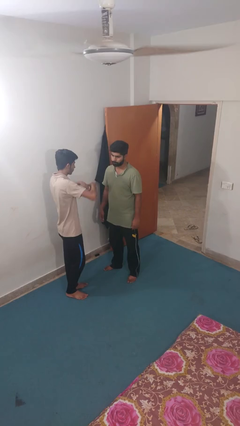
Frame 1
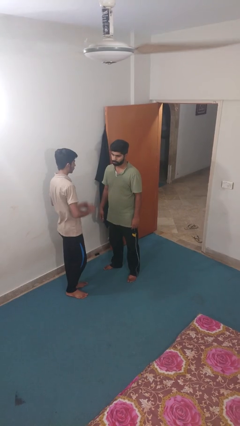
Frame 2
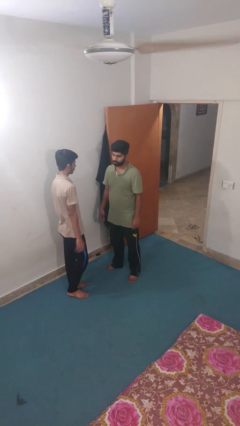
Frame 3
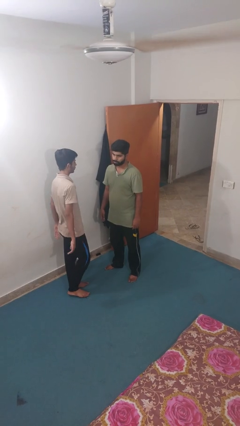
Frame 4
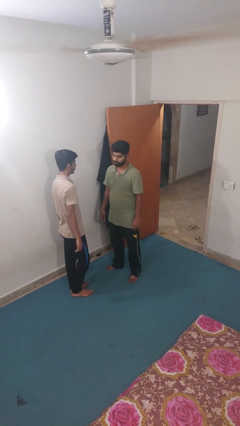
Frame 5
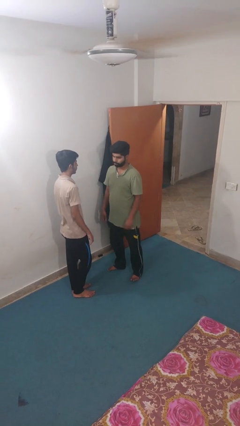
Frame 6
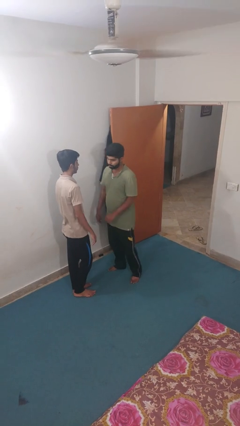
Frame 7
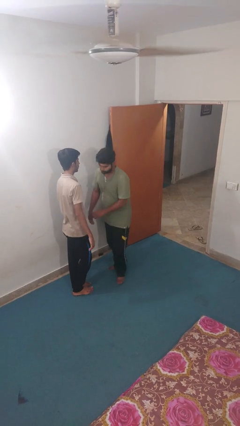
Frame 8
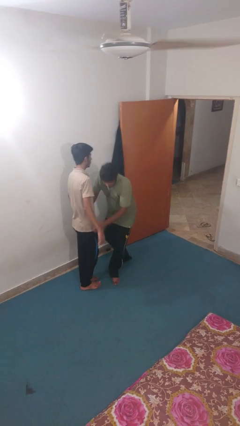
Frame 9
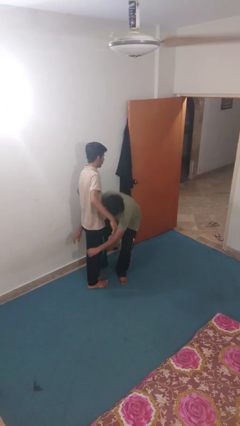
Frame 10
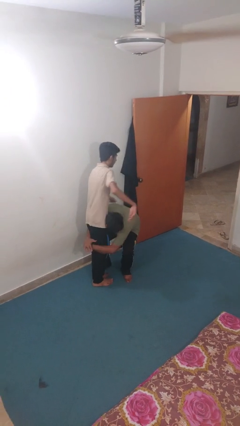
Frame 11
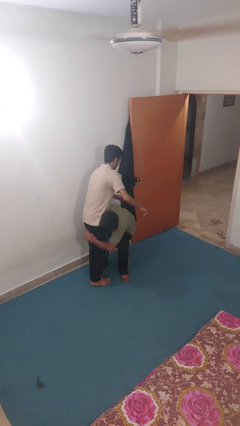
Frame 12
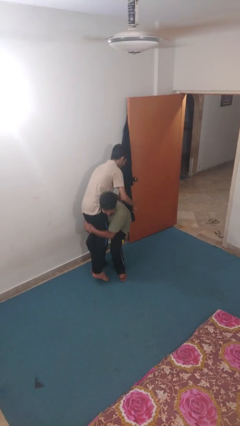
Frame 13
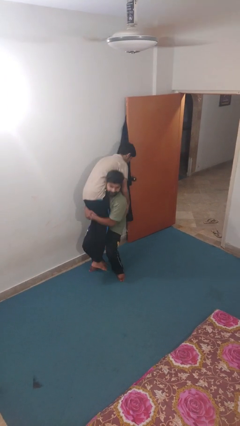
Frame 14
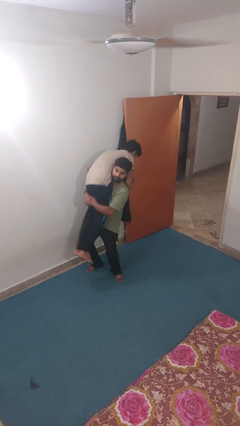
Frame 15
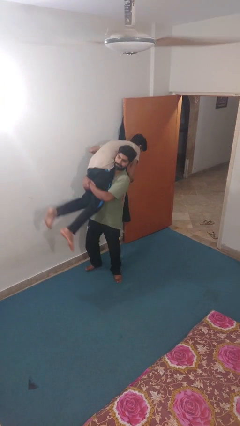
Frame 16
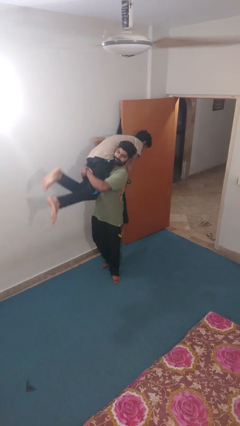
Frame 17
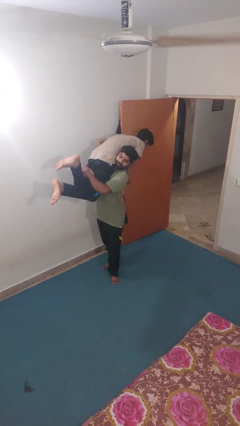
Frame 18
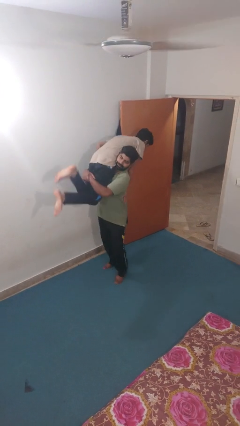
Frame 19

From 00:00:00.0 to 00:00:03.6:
person carries person over shoulder

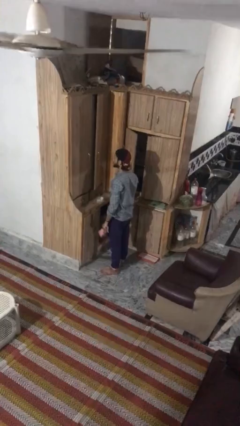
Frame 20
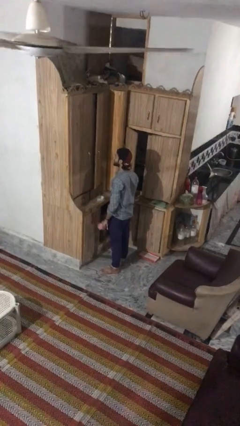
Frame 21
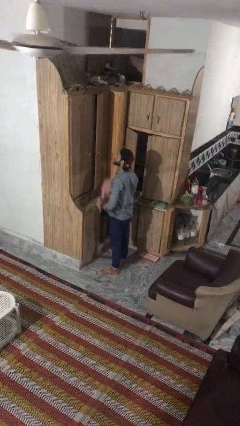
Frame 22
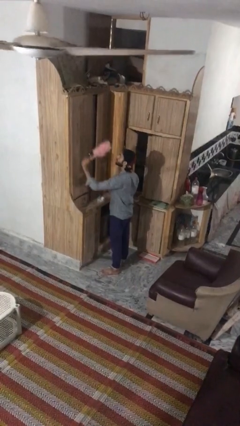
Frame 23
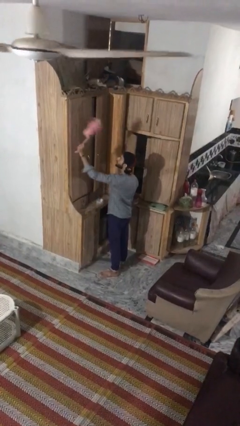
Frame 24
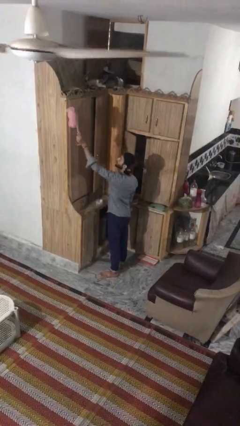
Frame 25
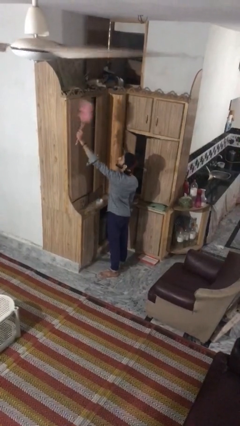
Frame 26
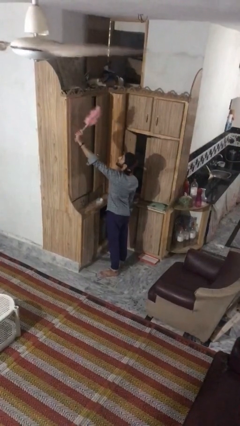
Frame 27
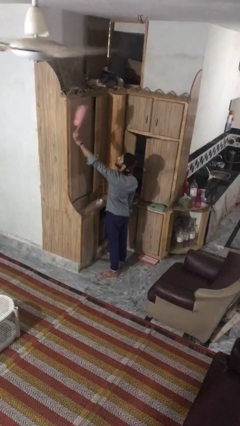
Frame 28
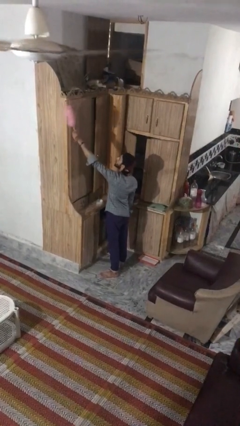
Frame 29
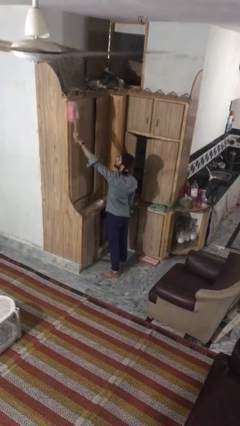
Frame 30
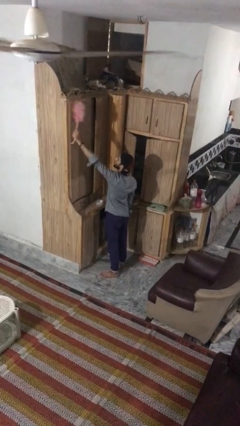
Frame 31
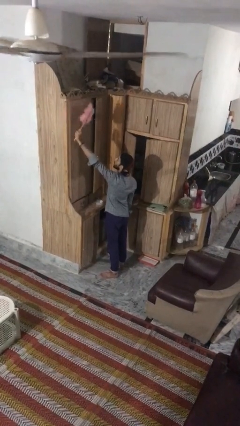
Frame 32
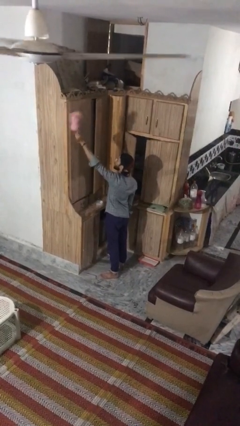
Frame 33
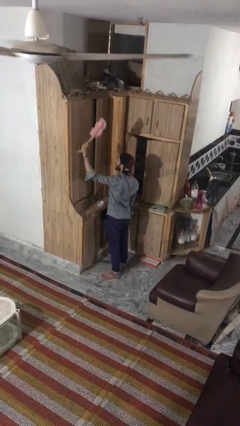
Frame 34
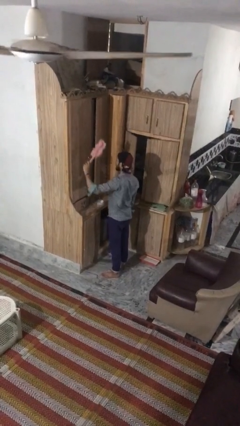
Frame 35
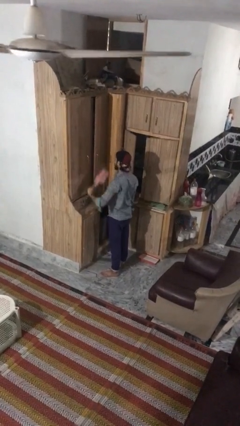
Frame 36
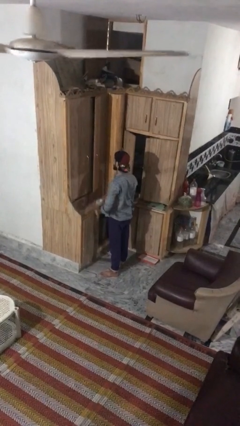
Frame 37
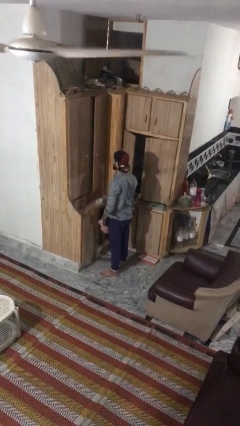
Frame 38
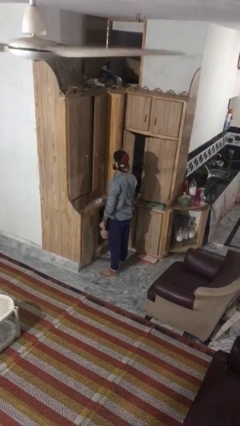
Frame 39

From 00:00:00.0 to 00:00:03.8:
person dusts furniture

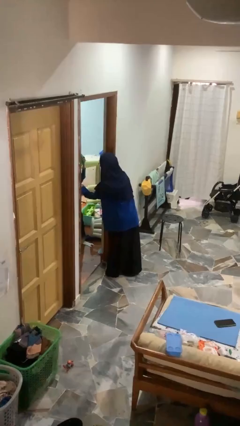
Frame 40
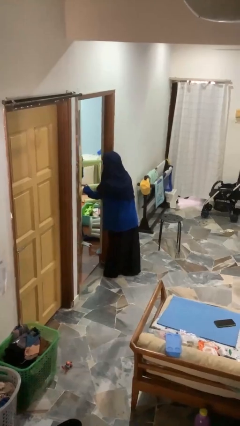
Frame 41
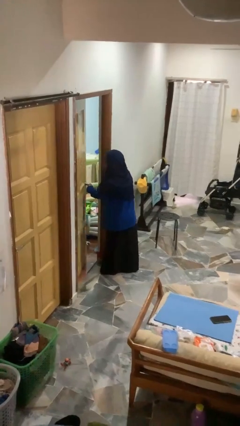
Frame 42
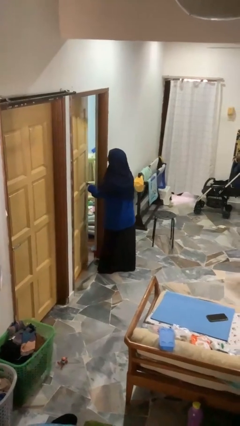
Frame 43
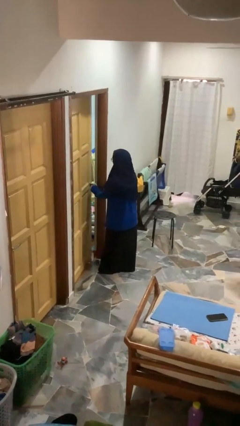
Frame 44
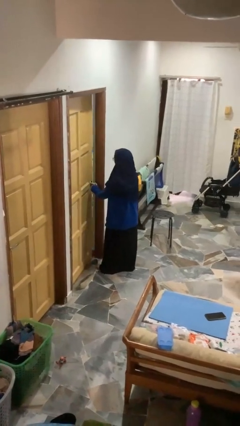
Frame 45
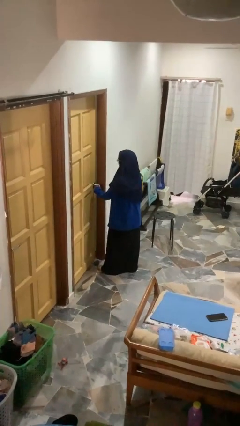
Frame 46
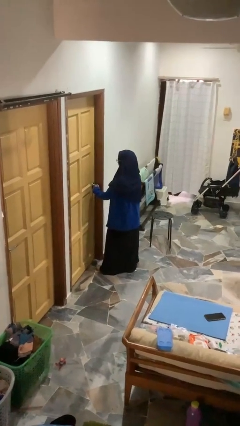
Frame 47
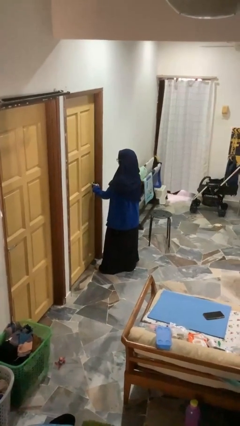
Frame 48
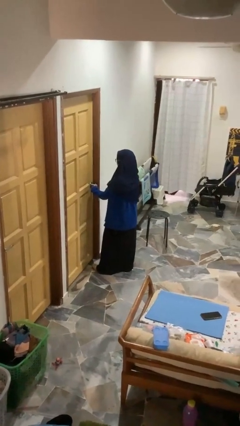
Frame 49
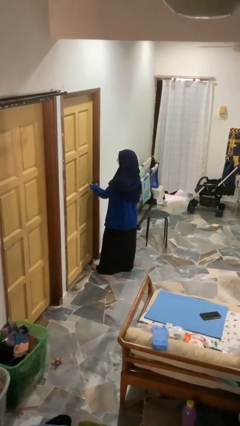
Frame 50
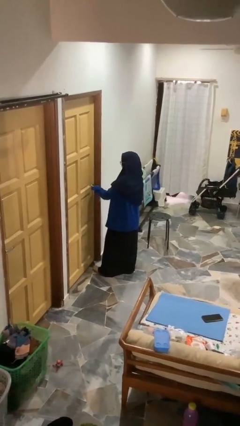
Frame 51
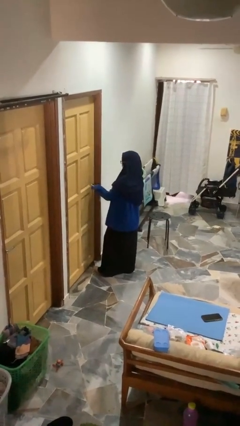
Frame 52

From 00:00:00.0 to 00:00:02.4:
person closes facility door

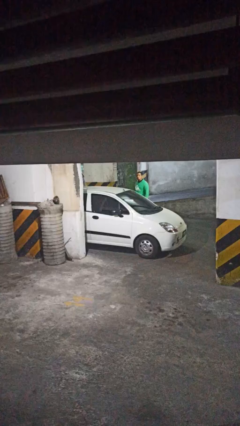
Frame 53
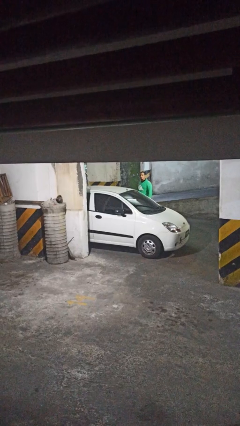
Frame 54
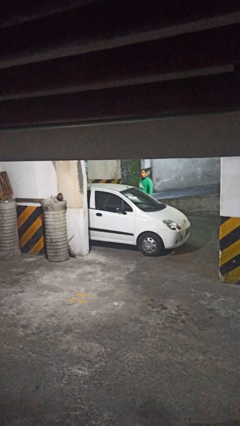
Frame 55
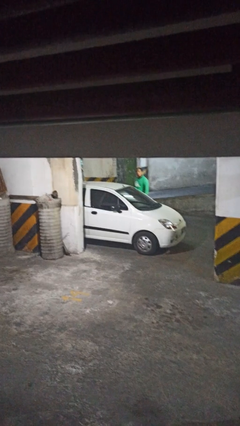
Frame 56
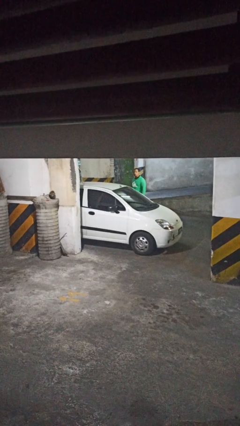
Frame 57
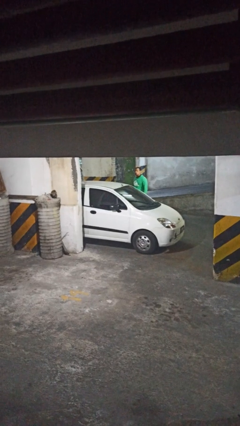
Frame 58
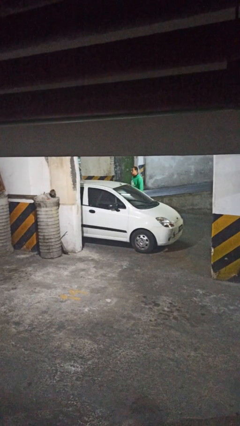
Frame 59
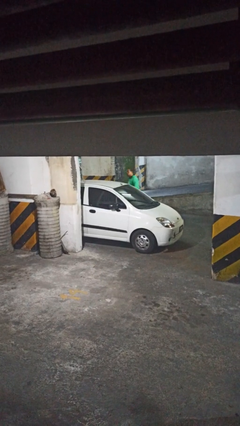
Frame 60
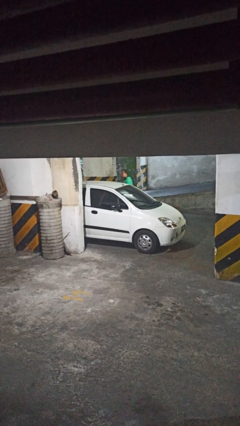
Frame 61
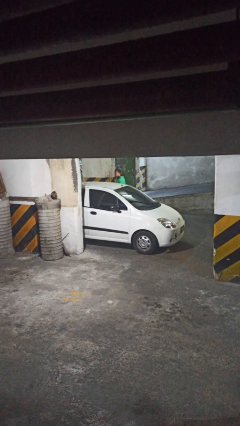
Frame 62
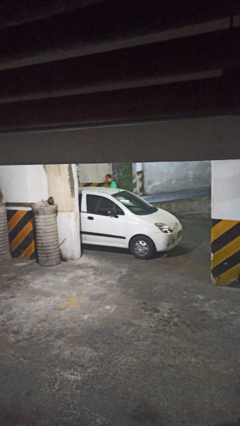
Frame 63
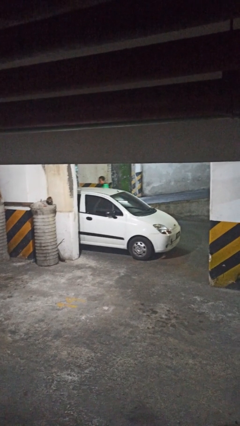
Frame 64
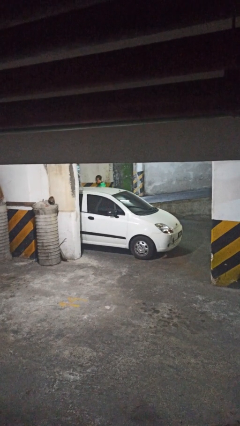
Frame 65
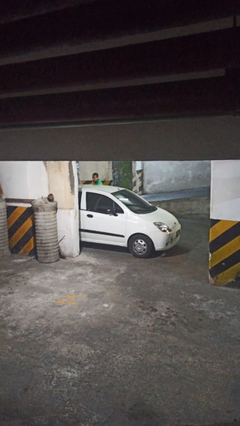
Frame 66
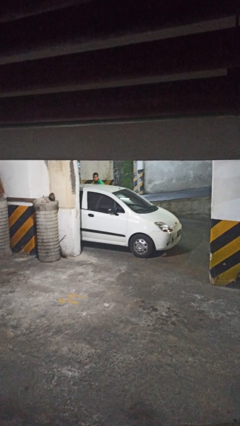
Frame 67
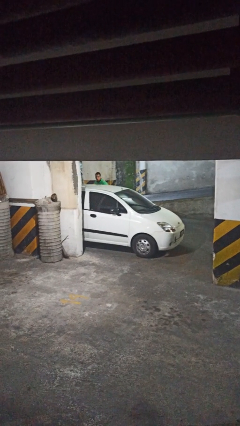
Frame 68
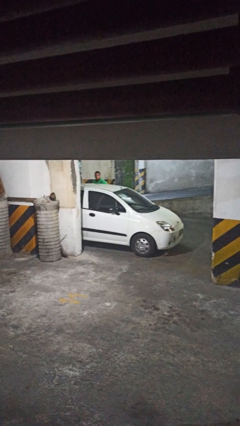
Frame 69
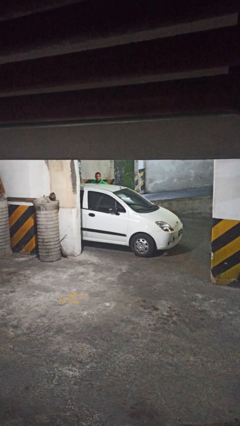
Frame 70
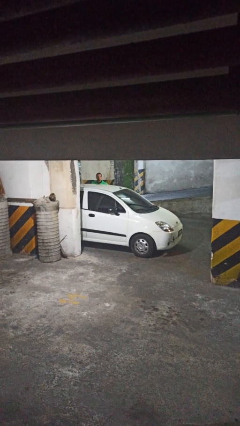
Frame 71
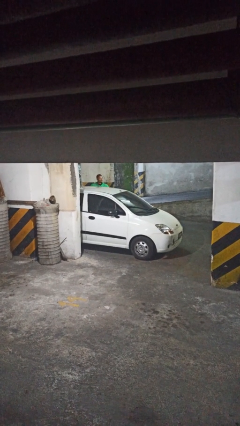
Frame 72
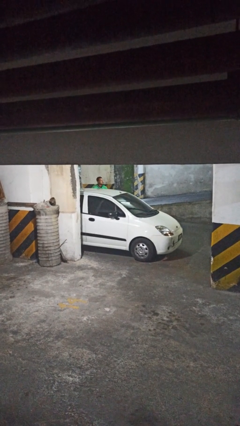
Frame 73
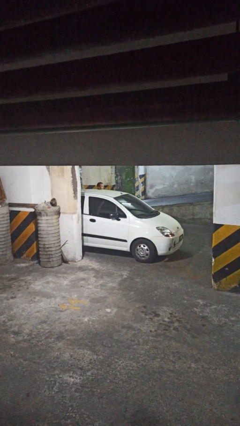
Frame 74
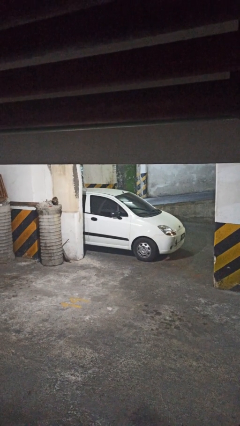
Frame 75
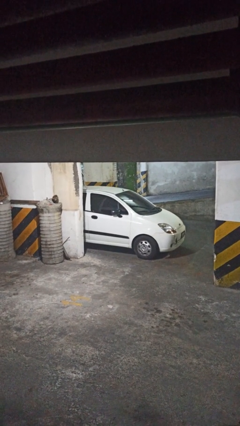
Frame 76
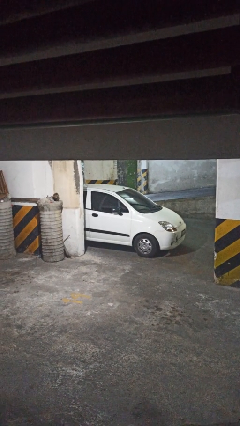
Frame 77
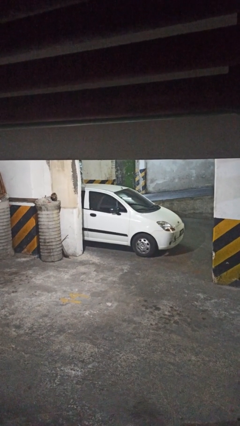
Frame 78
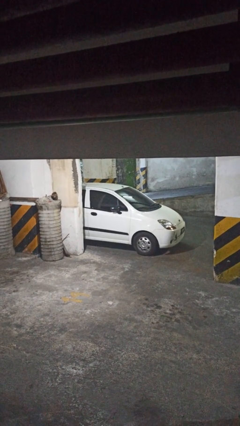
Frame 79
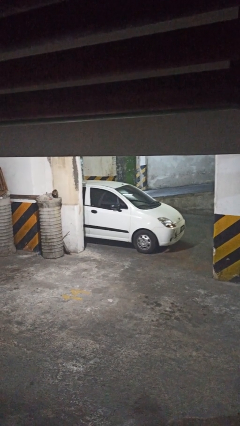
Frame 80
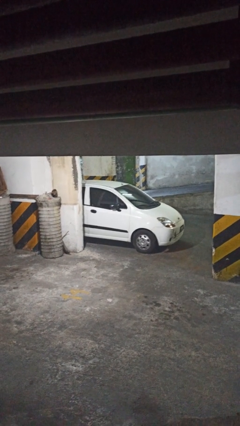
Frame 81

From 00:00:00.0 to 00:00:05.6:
car picks up person

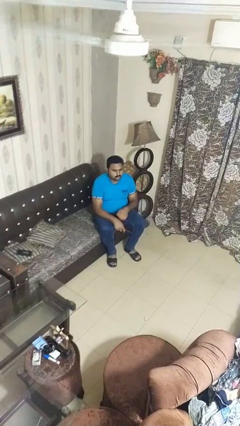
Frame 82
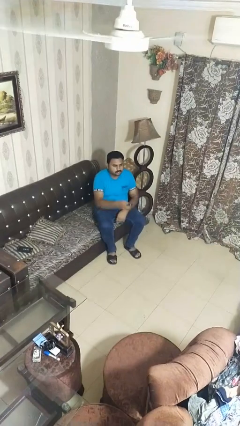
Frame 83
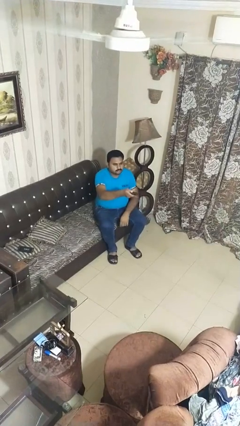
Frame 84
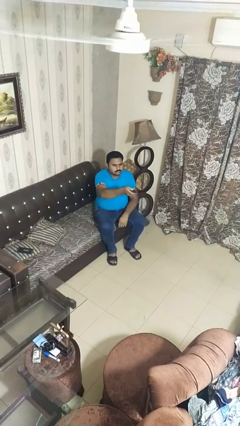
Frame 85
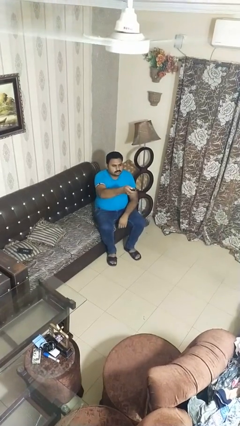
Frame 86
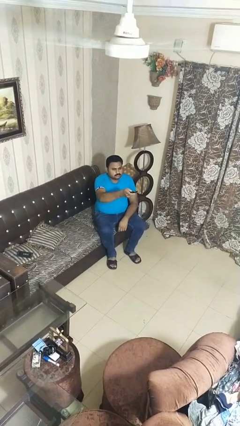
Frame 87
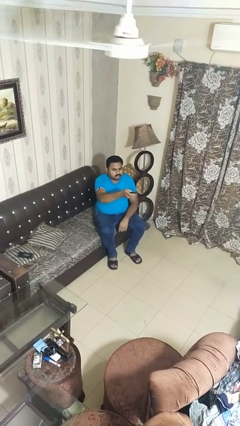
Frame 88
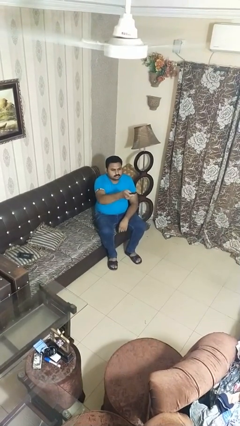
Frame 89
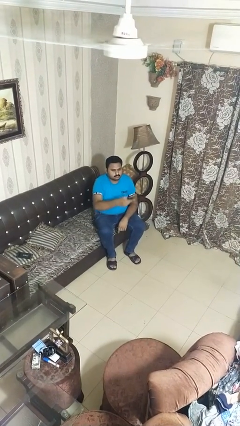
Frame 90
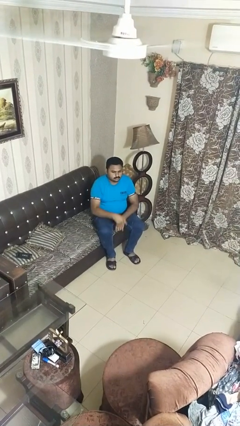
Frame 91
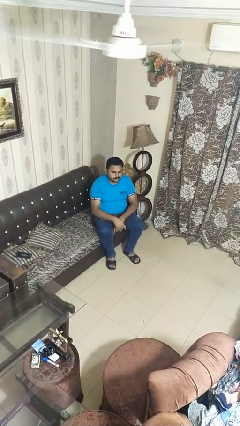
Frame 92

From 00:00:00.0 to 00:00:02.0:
person uses television remote

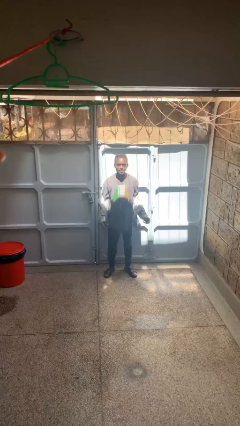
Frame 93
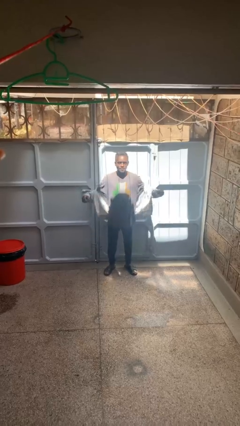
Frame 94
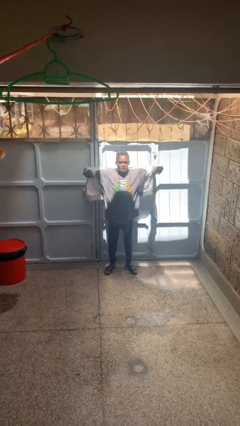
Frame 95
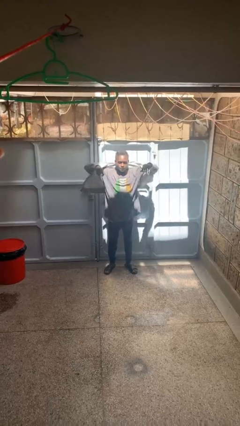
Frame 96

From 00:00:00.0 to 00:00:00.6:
person puts on hoodie
